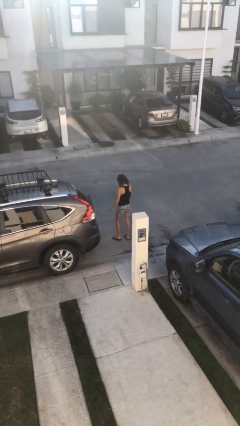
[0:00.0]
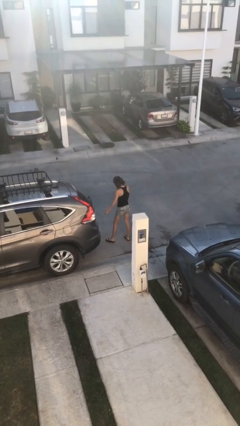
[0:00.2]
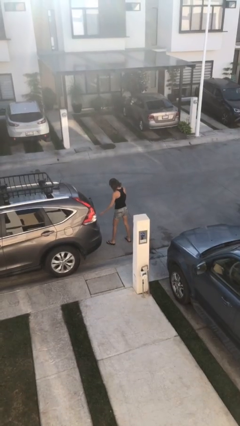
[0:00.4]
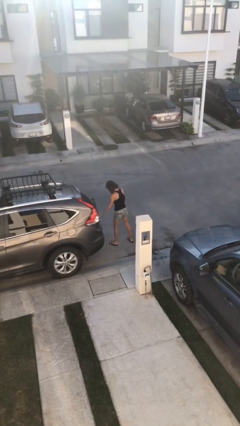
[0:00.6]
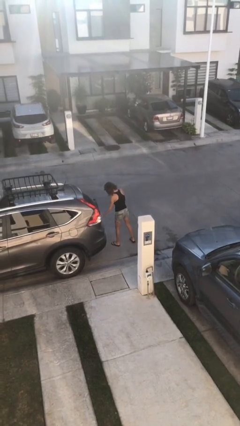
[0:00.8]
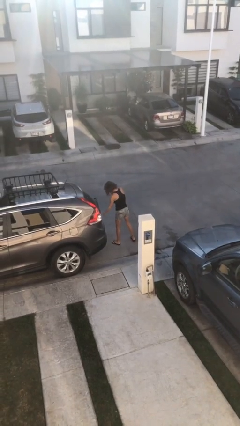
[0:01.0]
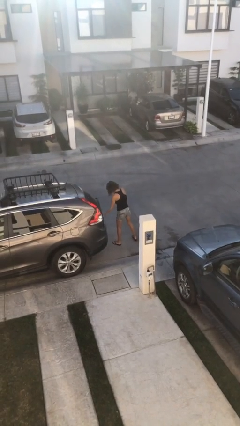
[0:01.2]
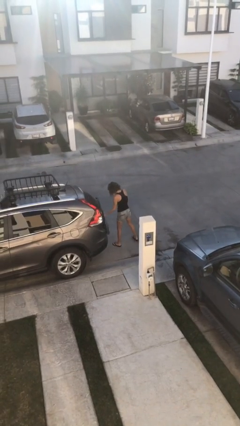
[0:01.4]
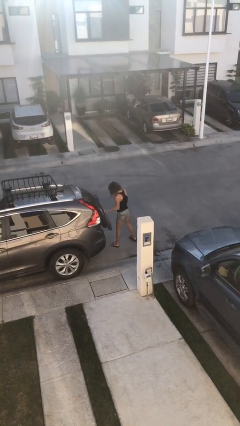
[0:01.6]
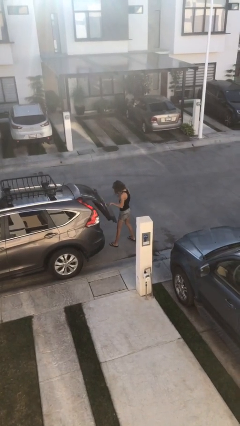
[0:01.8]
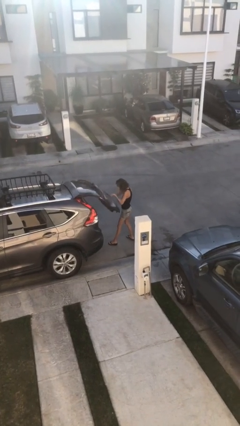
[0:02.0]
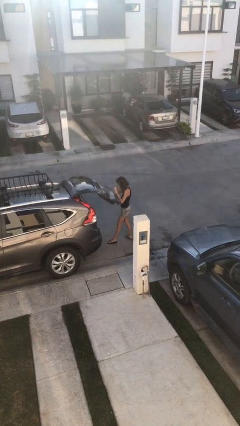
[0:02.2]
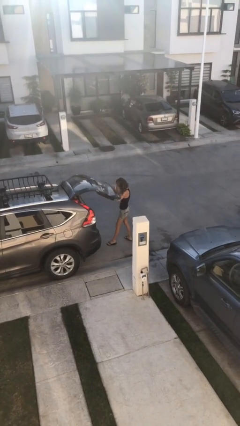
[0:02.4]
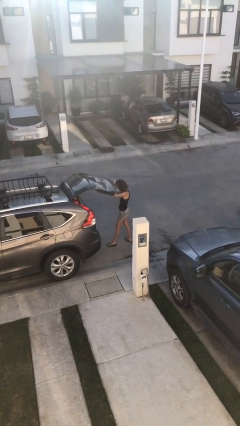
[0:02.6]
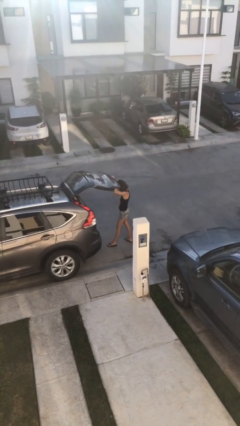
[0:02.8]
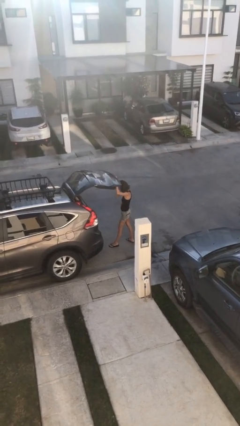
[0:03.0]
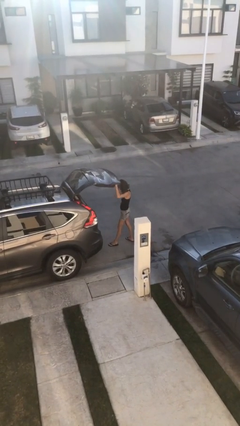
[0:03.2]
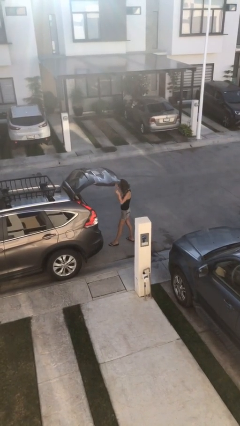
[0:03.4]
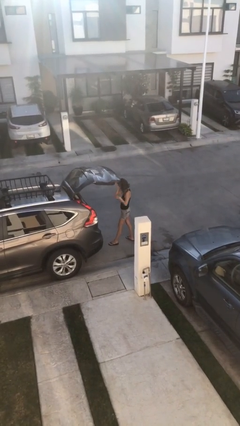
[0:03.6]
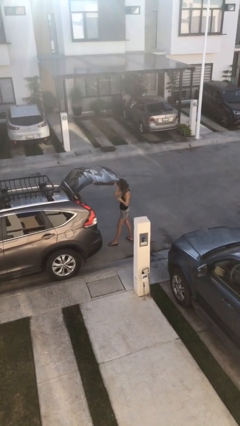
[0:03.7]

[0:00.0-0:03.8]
person opens car trunk

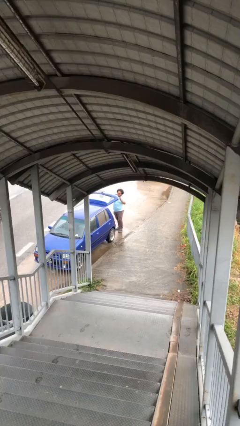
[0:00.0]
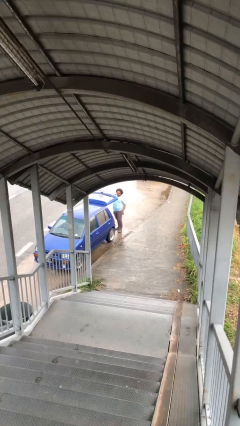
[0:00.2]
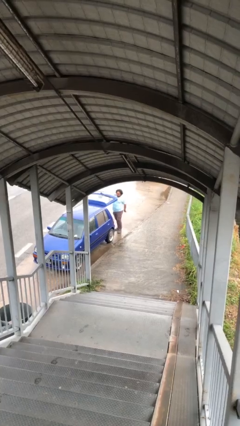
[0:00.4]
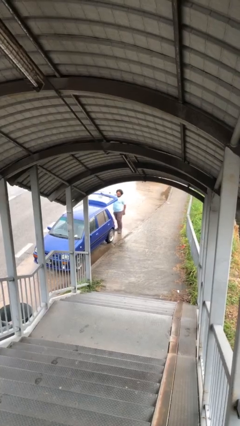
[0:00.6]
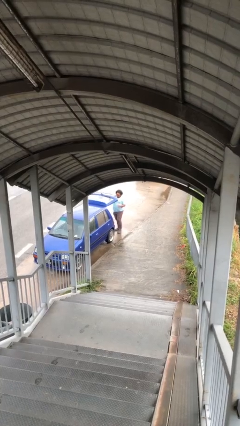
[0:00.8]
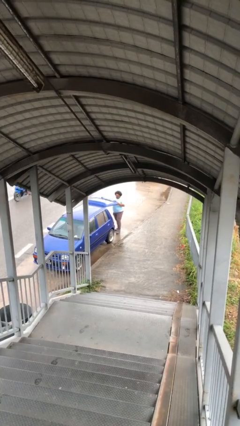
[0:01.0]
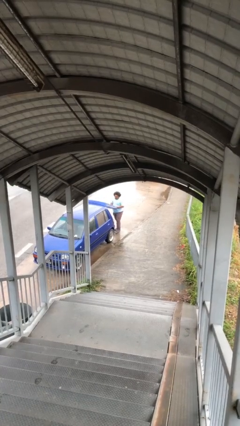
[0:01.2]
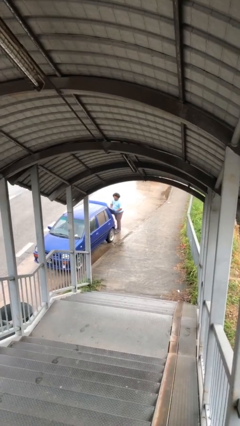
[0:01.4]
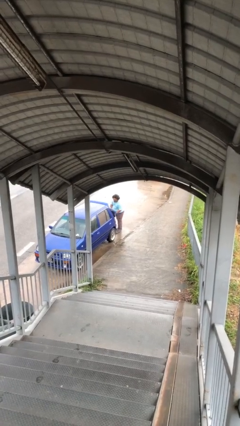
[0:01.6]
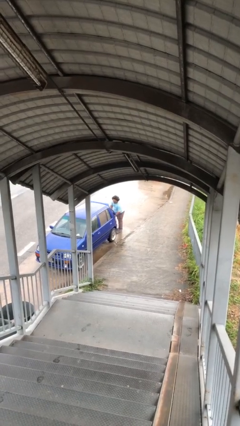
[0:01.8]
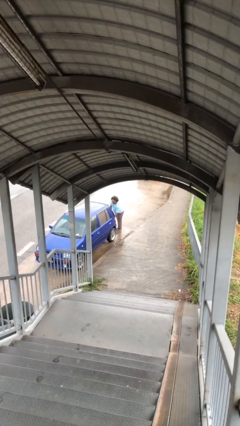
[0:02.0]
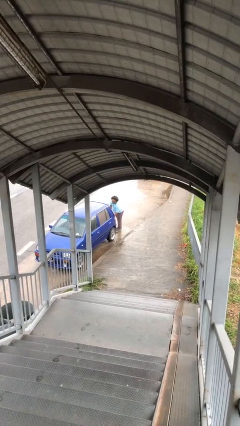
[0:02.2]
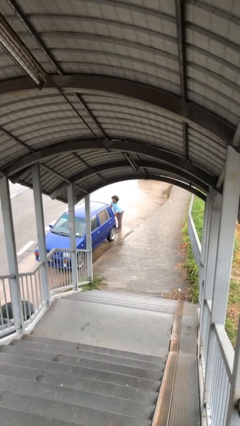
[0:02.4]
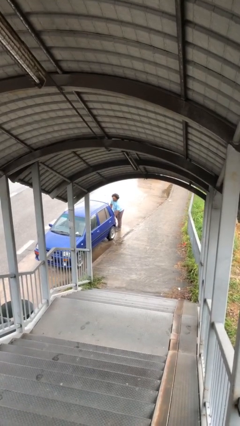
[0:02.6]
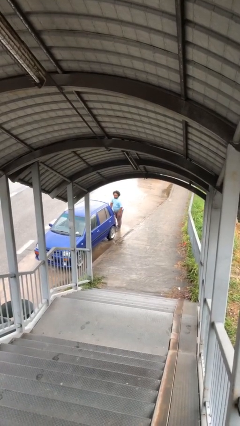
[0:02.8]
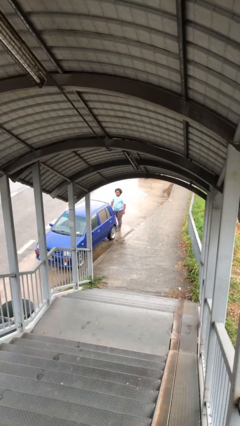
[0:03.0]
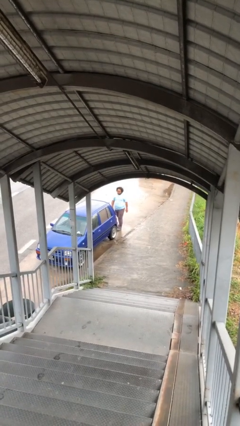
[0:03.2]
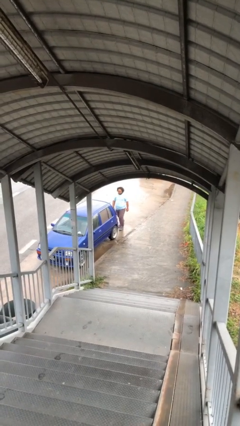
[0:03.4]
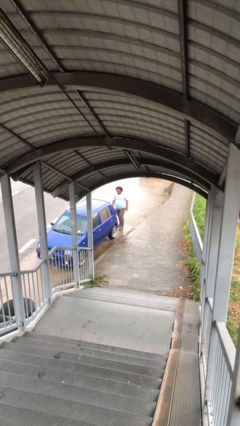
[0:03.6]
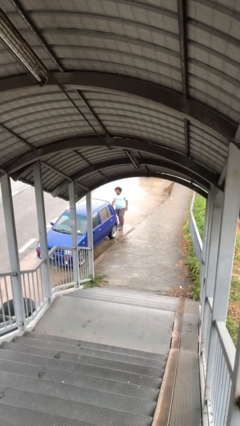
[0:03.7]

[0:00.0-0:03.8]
person closes car trunk

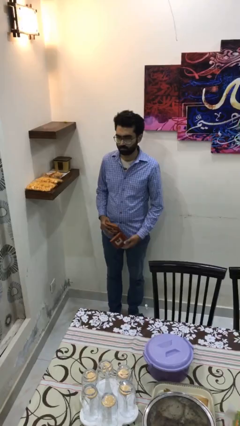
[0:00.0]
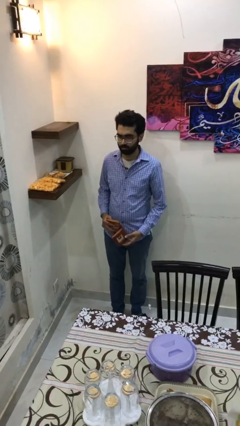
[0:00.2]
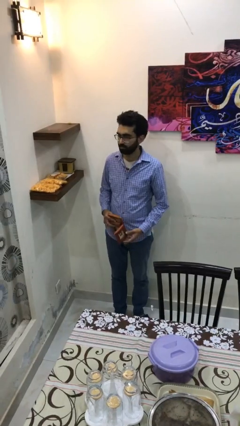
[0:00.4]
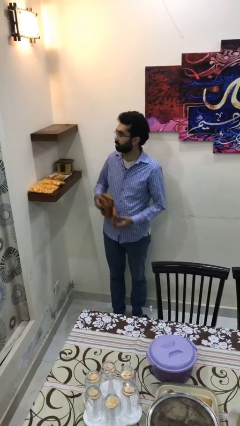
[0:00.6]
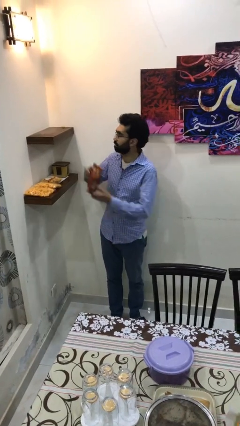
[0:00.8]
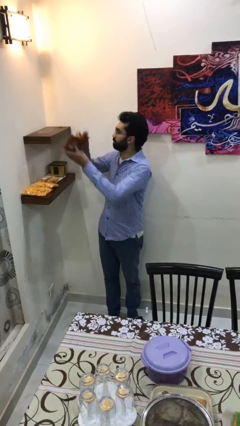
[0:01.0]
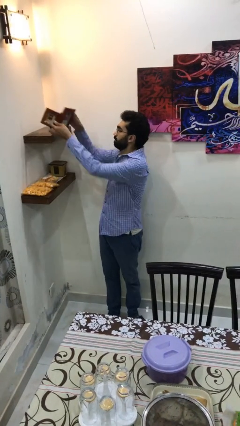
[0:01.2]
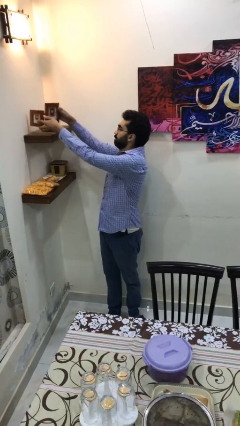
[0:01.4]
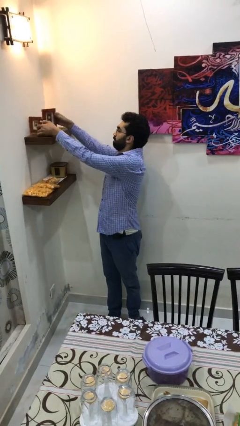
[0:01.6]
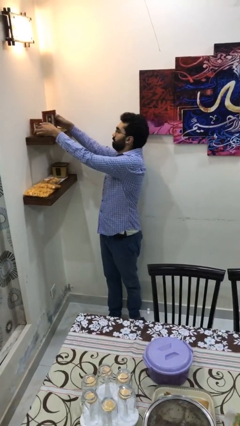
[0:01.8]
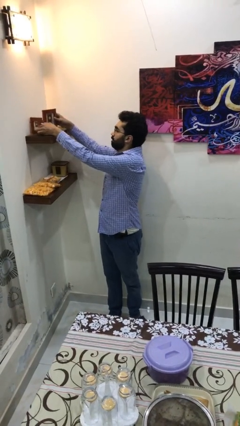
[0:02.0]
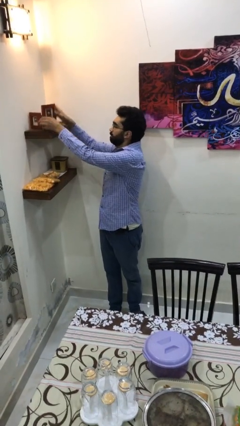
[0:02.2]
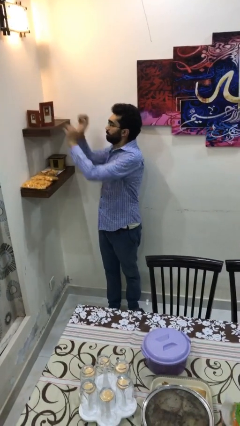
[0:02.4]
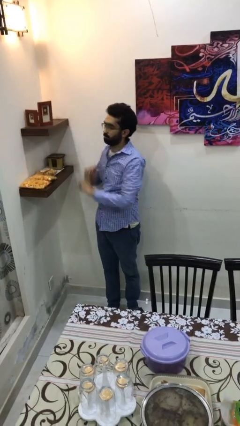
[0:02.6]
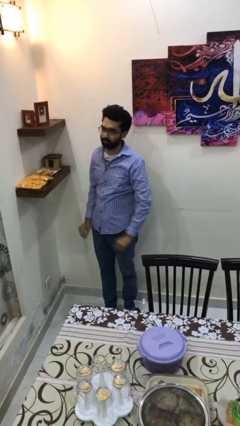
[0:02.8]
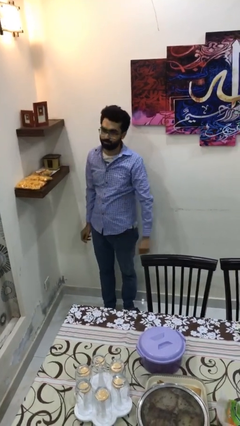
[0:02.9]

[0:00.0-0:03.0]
person puts down object on shelf

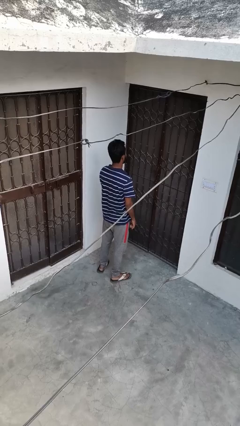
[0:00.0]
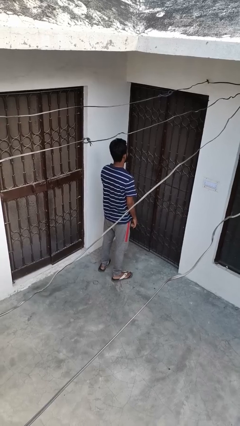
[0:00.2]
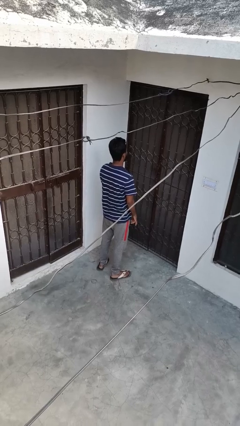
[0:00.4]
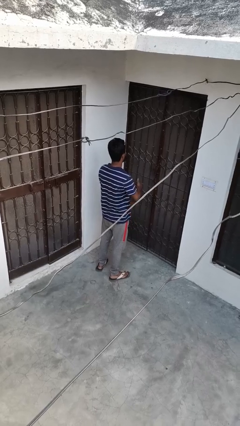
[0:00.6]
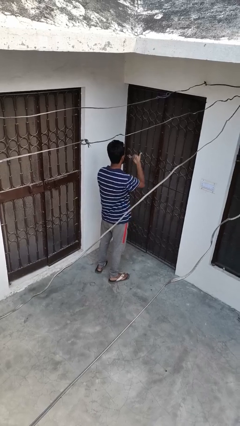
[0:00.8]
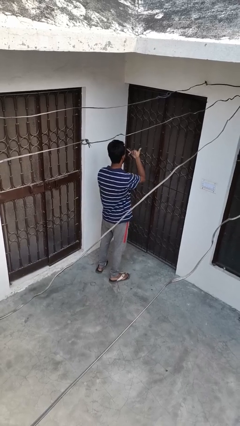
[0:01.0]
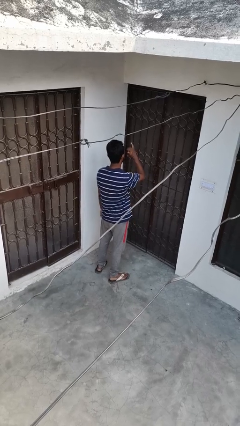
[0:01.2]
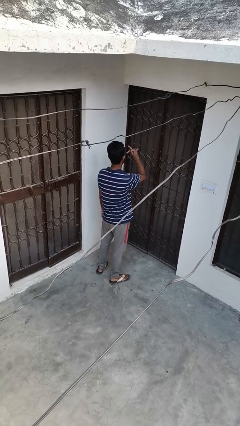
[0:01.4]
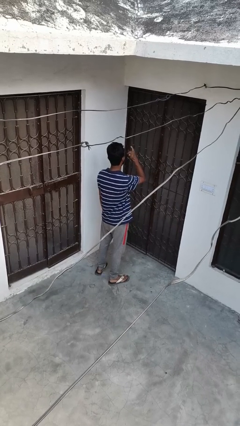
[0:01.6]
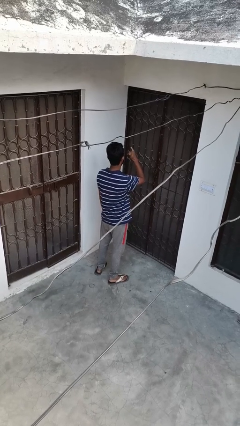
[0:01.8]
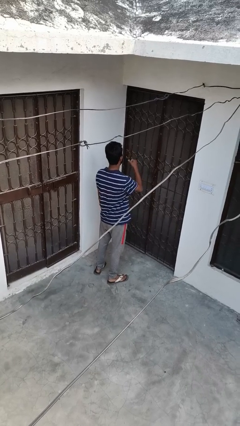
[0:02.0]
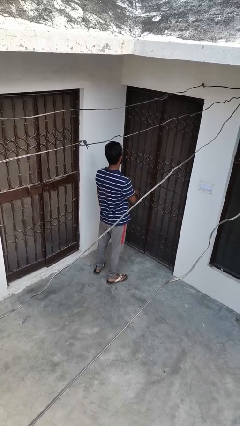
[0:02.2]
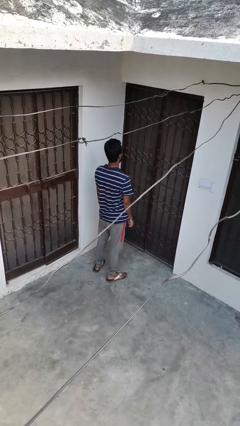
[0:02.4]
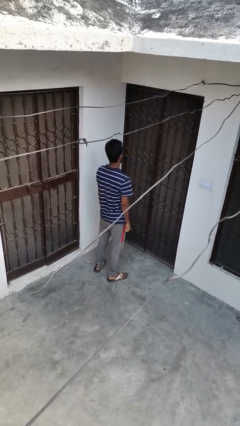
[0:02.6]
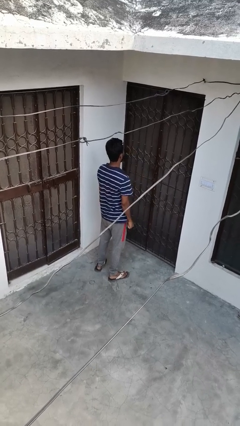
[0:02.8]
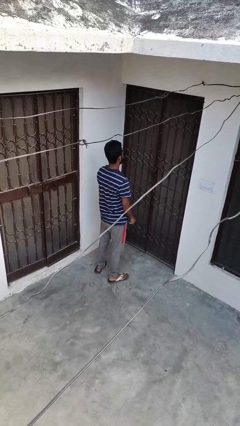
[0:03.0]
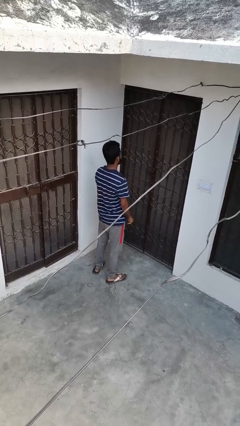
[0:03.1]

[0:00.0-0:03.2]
person gestures hang loose

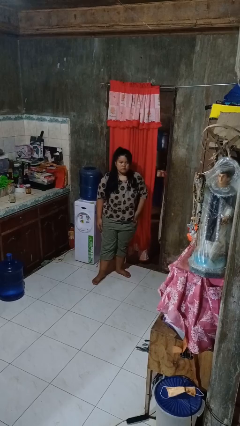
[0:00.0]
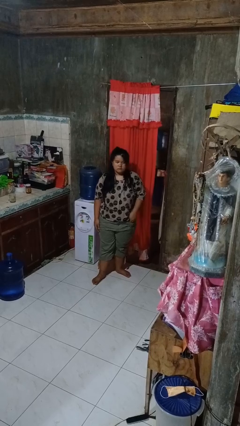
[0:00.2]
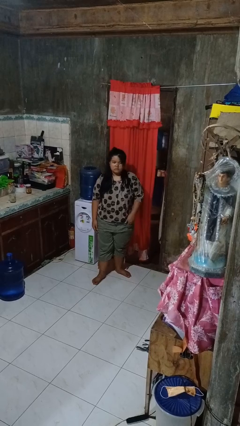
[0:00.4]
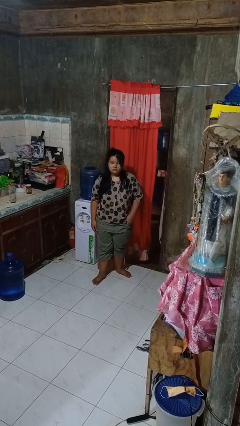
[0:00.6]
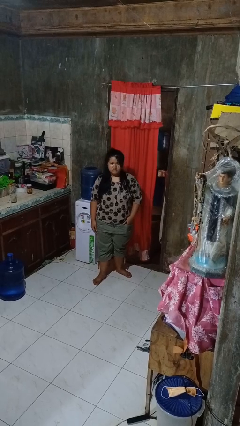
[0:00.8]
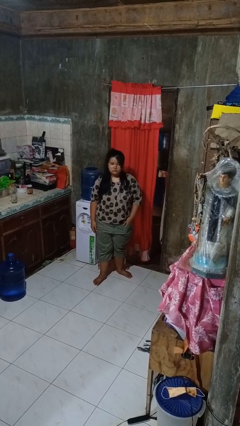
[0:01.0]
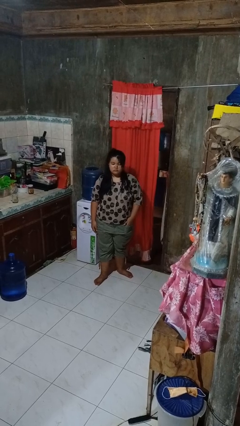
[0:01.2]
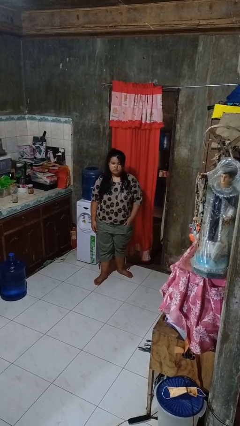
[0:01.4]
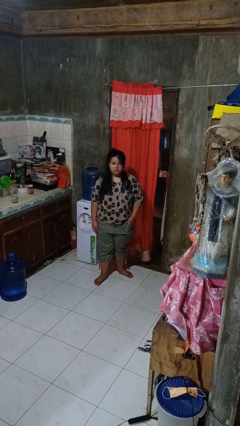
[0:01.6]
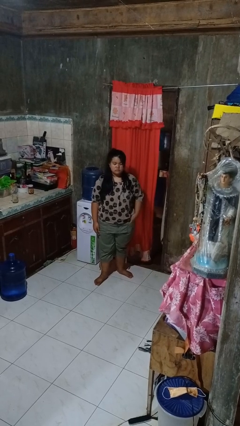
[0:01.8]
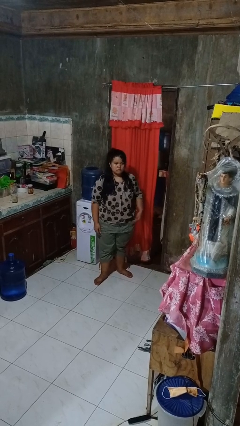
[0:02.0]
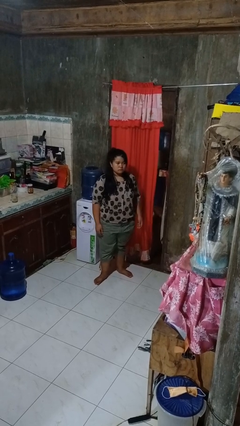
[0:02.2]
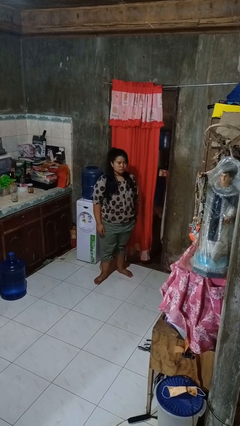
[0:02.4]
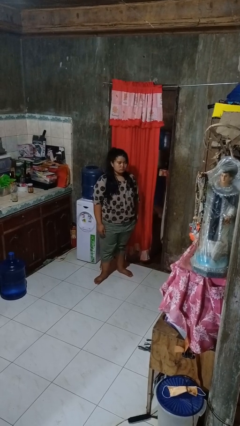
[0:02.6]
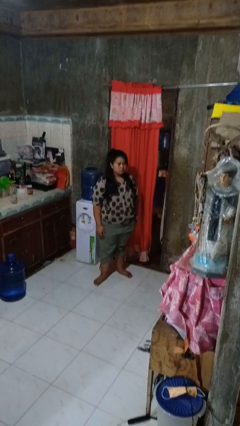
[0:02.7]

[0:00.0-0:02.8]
person puts hands in back pockets

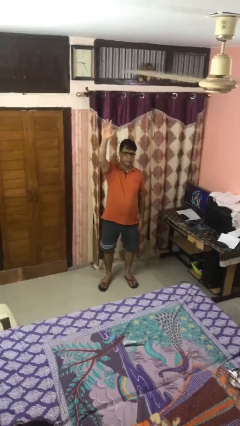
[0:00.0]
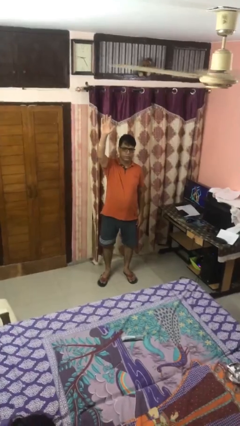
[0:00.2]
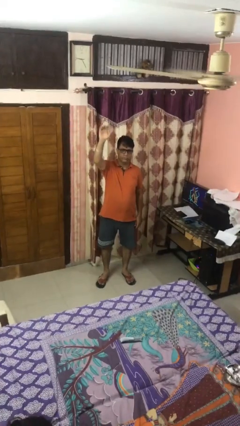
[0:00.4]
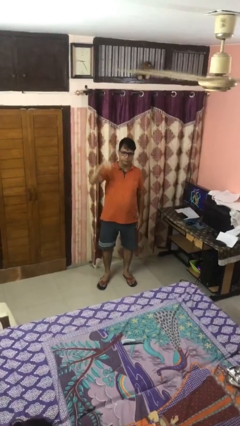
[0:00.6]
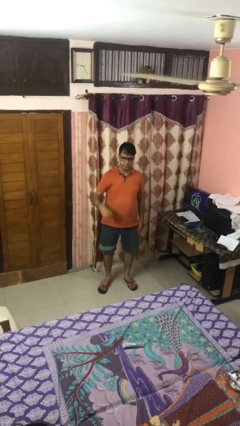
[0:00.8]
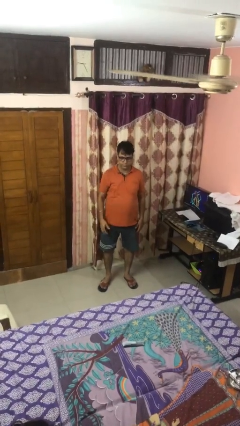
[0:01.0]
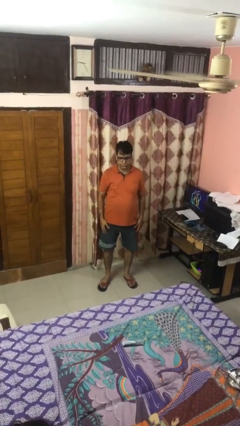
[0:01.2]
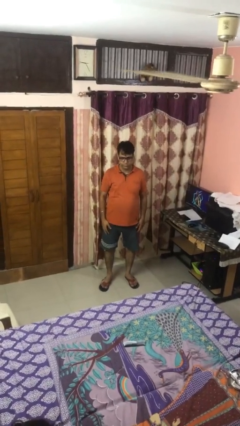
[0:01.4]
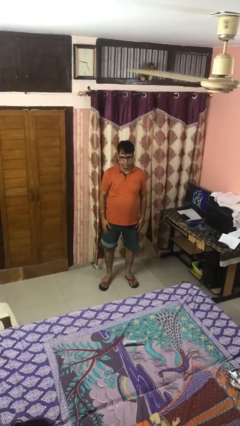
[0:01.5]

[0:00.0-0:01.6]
person gestures lower hand
